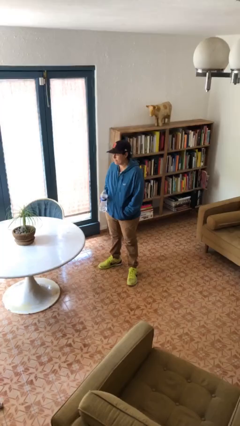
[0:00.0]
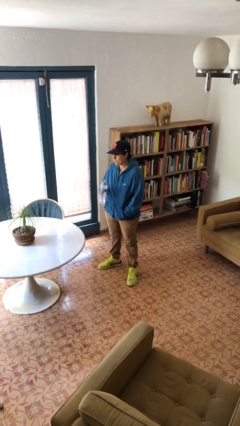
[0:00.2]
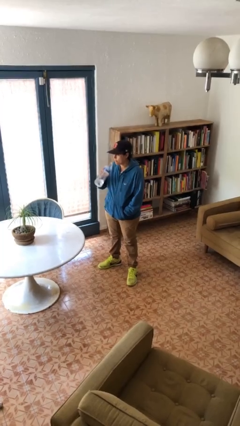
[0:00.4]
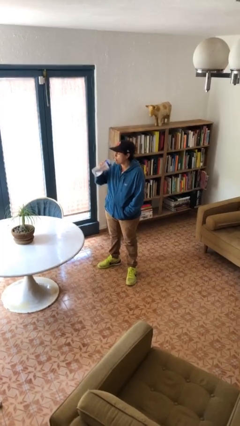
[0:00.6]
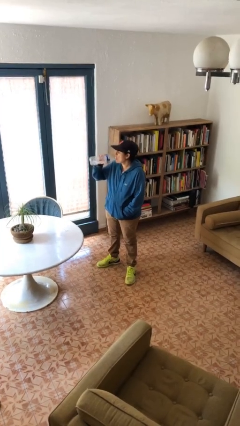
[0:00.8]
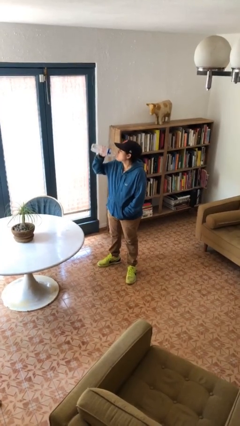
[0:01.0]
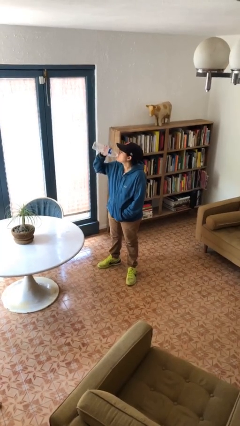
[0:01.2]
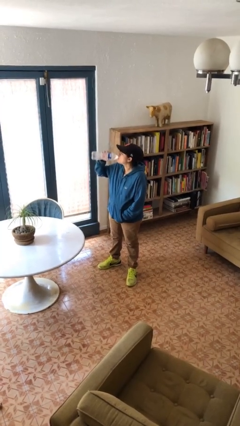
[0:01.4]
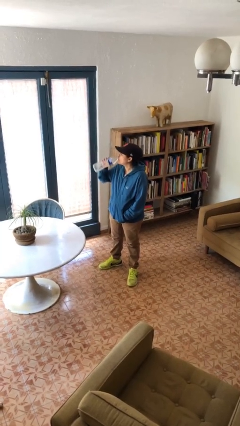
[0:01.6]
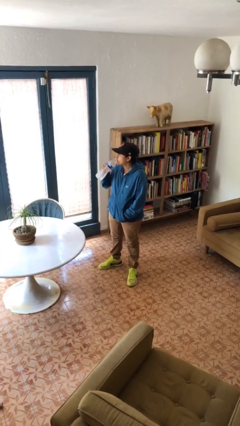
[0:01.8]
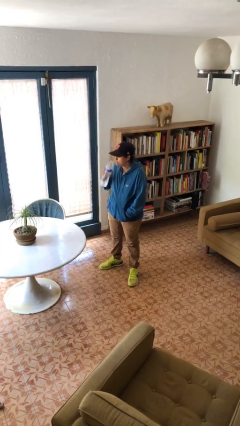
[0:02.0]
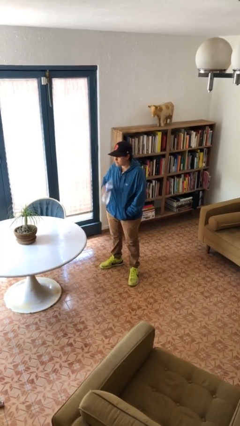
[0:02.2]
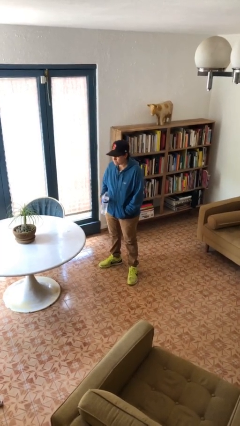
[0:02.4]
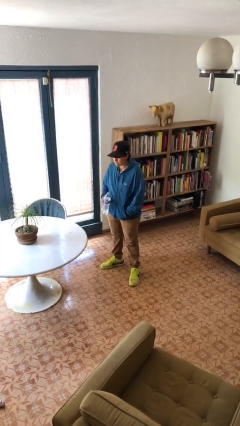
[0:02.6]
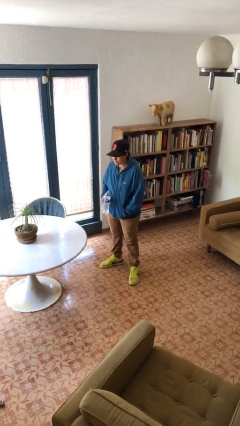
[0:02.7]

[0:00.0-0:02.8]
person drinks from bottle

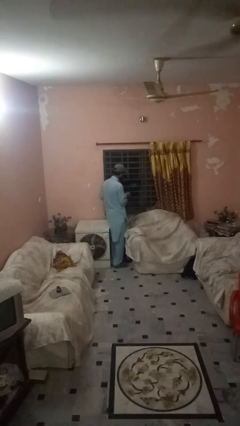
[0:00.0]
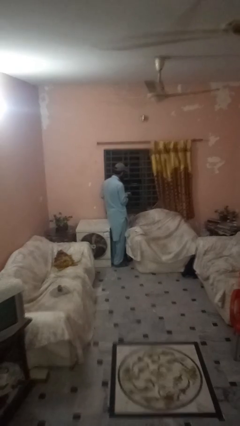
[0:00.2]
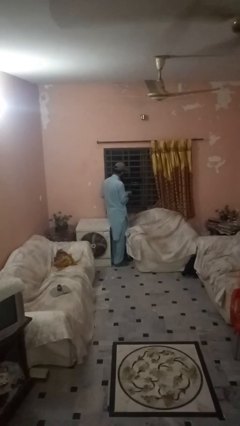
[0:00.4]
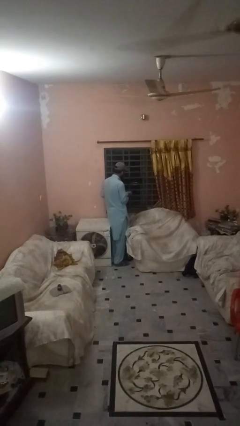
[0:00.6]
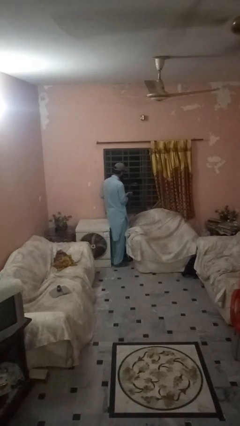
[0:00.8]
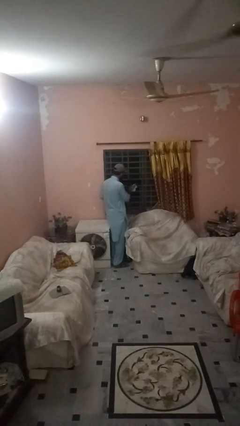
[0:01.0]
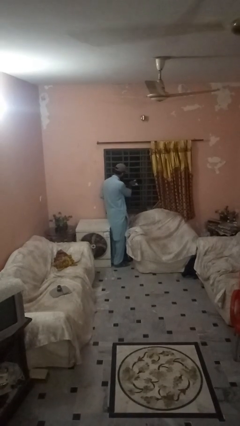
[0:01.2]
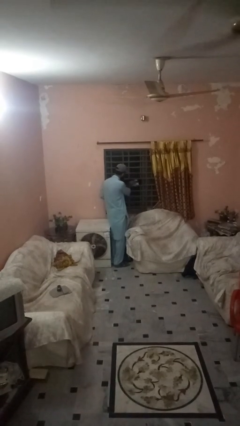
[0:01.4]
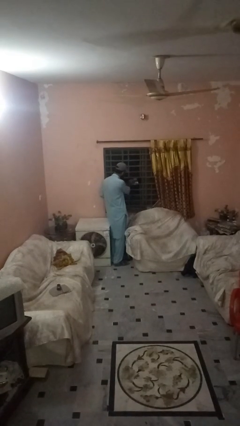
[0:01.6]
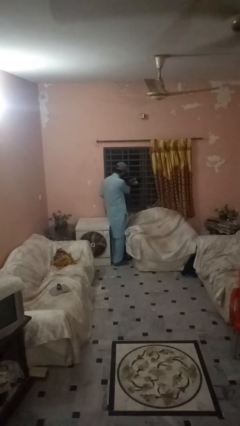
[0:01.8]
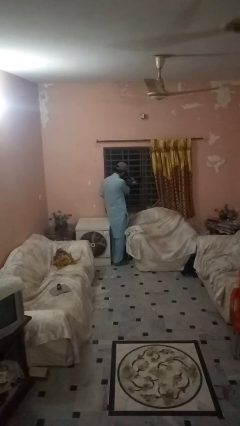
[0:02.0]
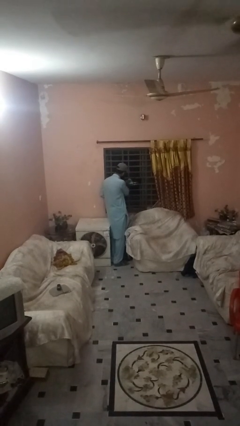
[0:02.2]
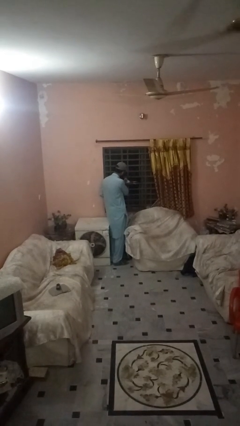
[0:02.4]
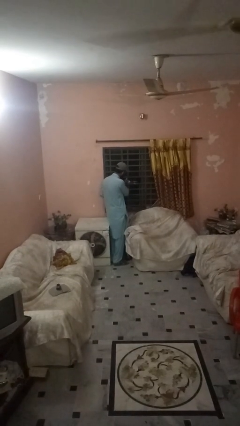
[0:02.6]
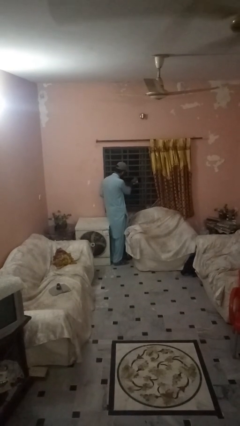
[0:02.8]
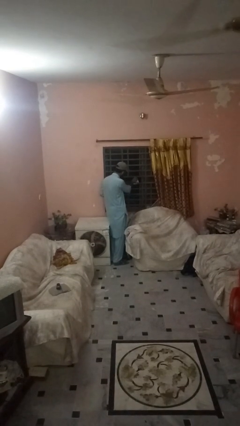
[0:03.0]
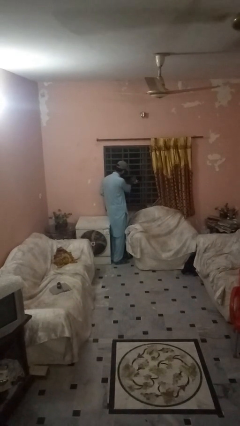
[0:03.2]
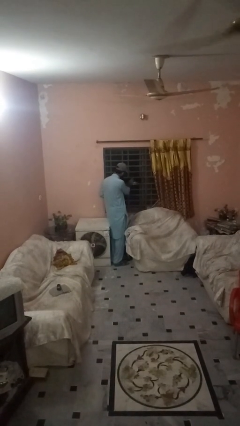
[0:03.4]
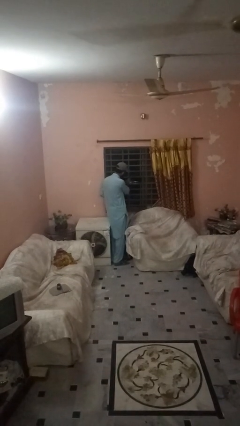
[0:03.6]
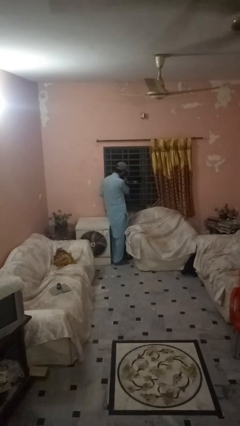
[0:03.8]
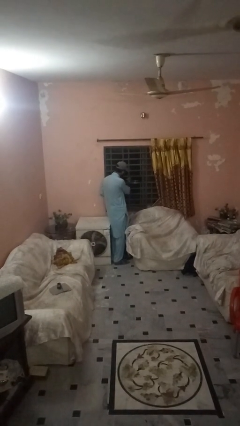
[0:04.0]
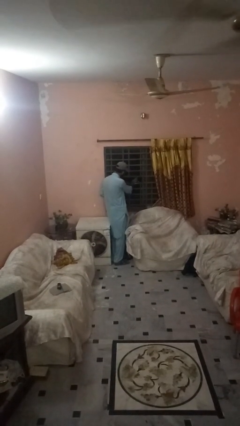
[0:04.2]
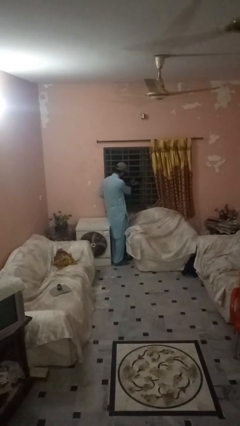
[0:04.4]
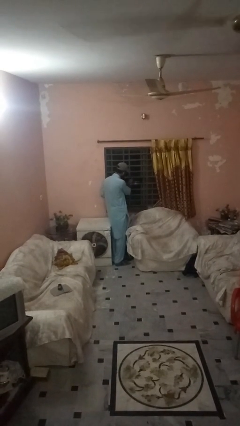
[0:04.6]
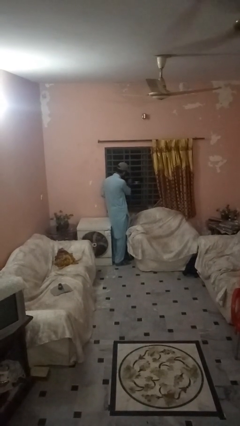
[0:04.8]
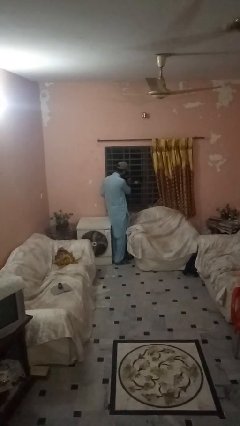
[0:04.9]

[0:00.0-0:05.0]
person washes window

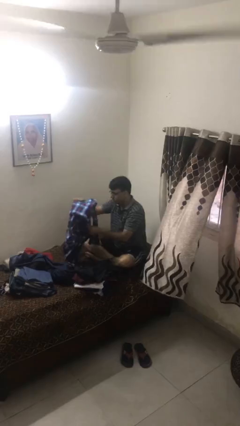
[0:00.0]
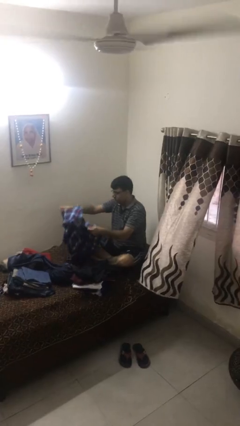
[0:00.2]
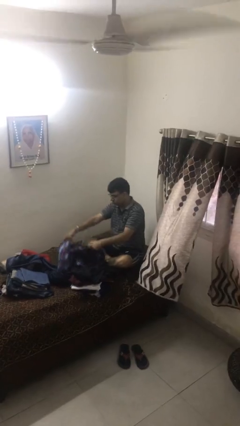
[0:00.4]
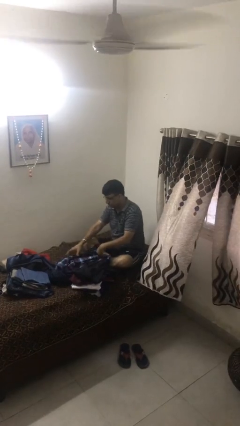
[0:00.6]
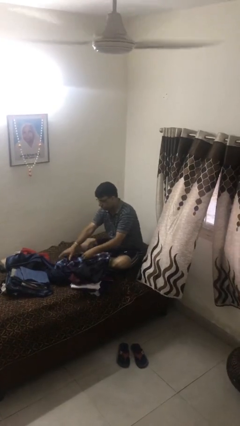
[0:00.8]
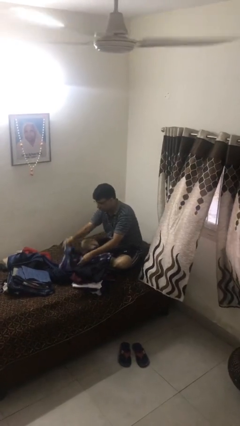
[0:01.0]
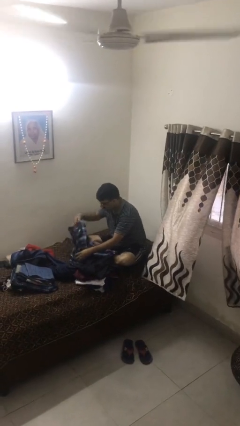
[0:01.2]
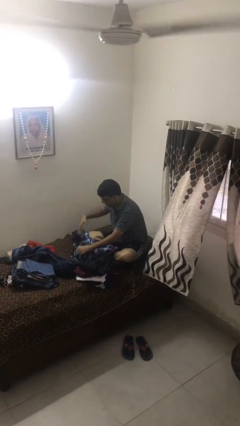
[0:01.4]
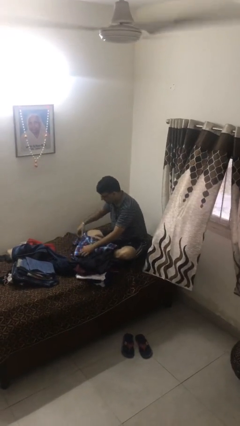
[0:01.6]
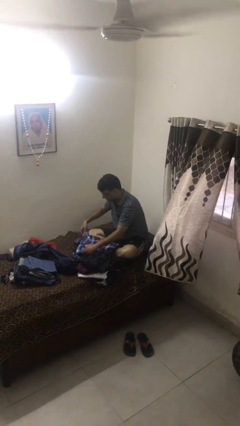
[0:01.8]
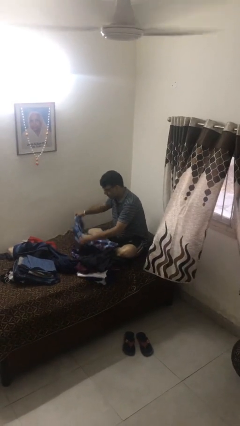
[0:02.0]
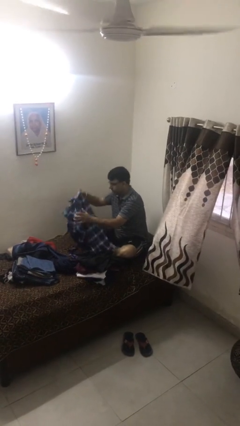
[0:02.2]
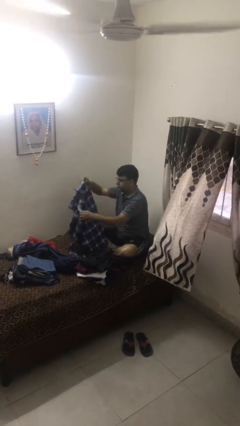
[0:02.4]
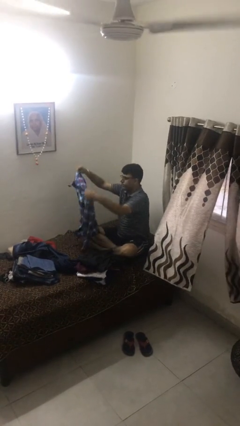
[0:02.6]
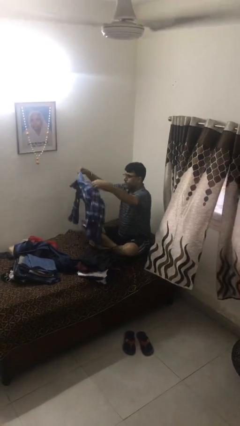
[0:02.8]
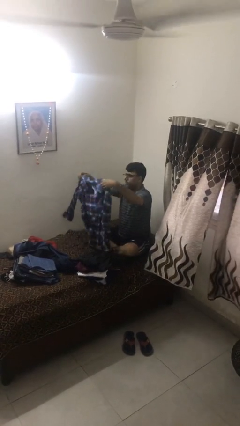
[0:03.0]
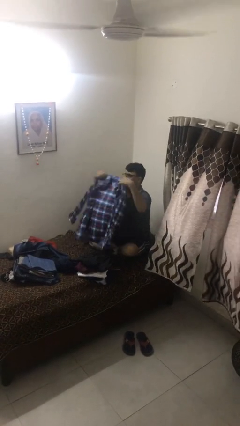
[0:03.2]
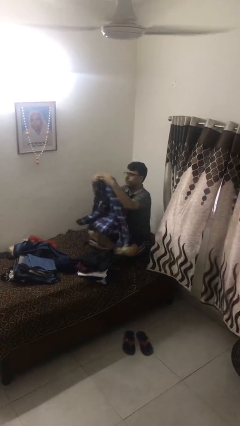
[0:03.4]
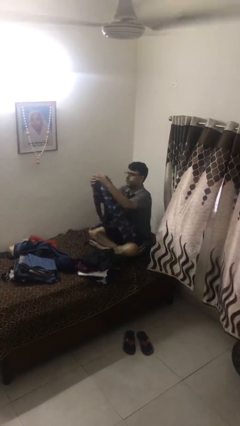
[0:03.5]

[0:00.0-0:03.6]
person folds shirt

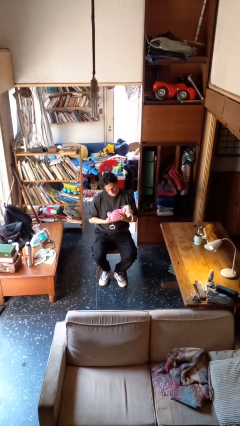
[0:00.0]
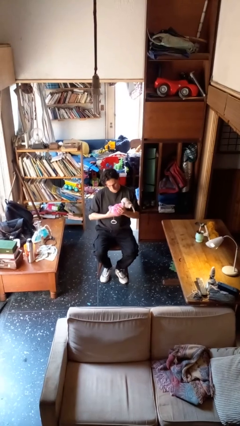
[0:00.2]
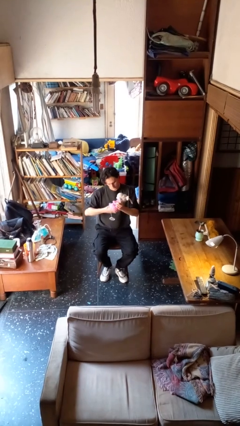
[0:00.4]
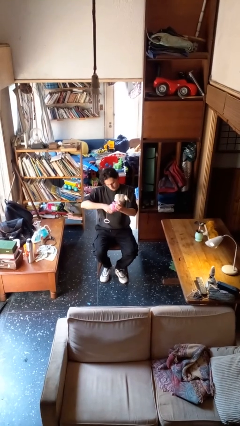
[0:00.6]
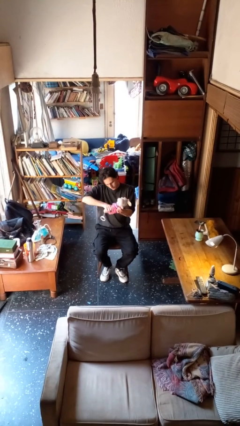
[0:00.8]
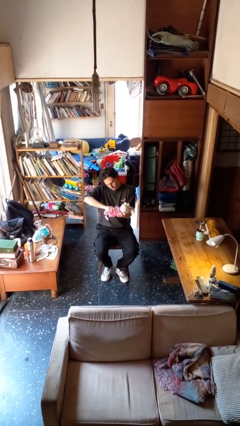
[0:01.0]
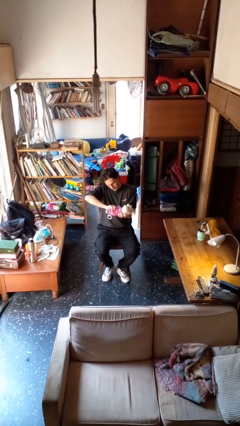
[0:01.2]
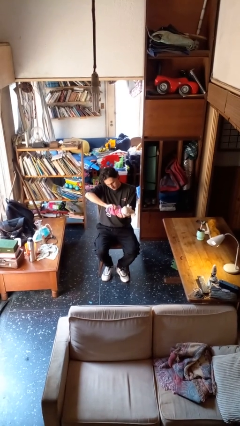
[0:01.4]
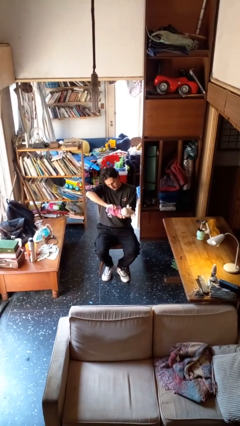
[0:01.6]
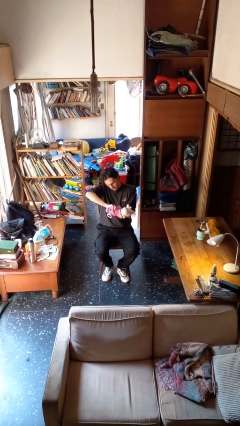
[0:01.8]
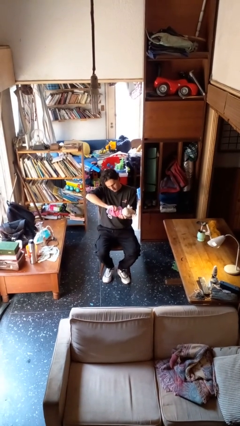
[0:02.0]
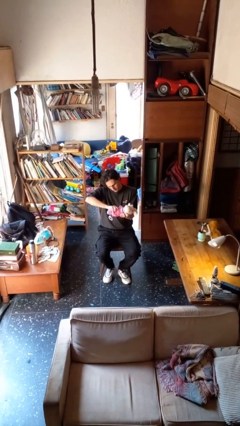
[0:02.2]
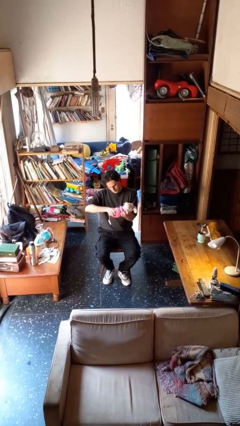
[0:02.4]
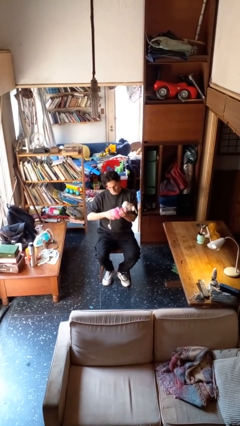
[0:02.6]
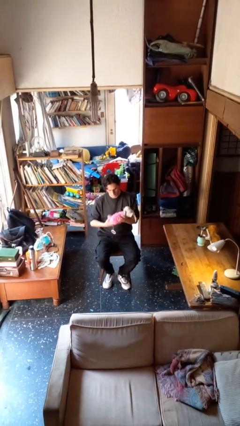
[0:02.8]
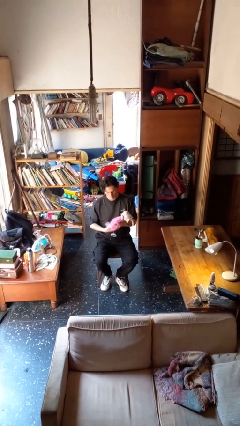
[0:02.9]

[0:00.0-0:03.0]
person squeezes object

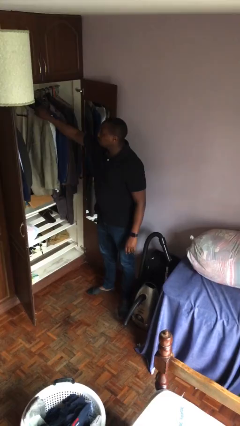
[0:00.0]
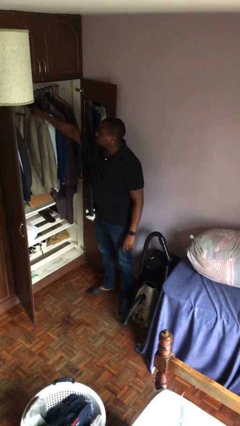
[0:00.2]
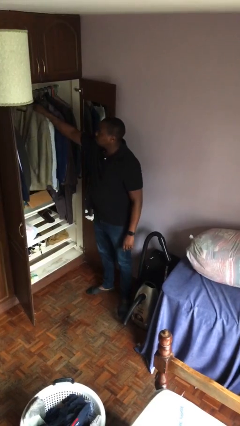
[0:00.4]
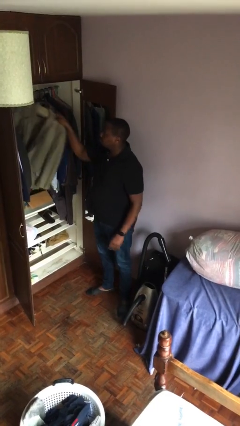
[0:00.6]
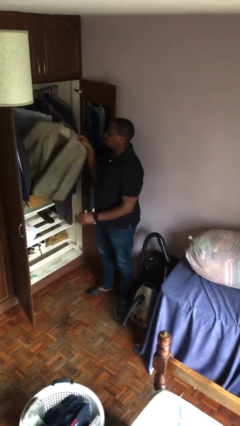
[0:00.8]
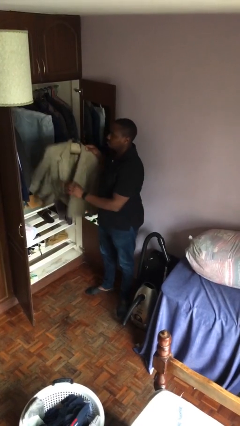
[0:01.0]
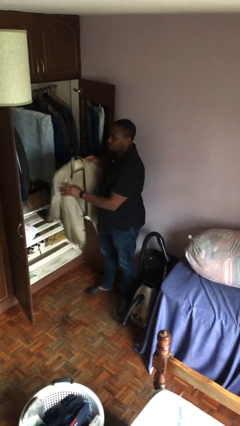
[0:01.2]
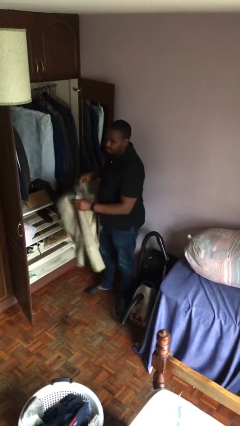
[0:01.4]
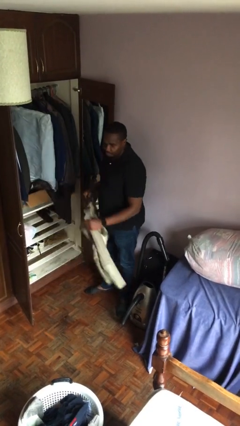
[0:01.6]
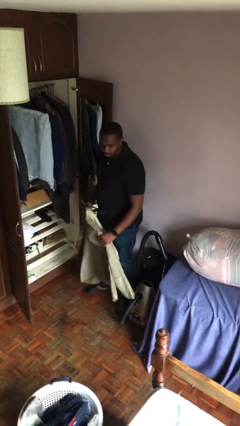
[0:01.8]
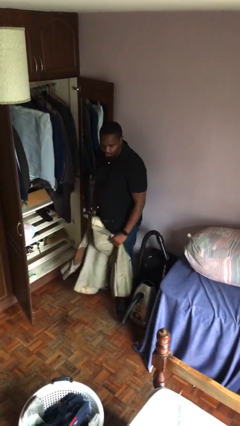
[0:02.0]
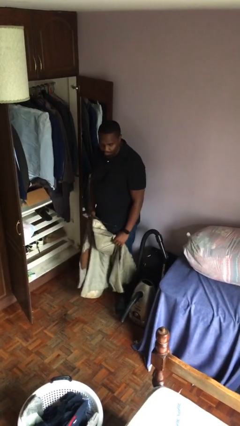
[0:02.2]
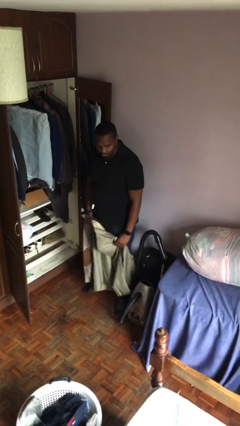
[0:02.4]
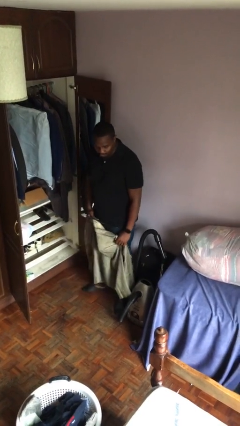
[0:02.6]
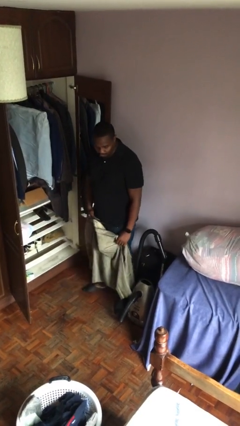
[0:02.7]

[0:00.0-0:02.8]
person takes clothes from closet

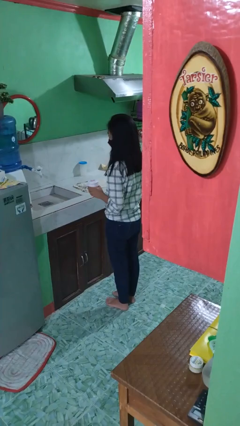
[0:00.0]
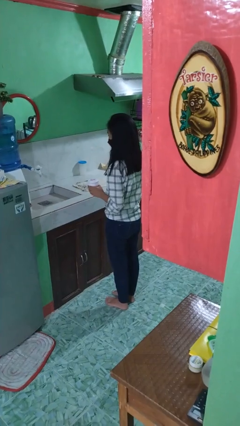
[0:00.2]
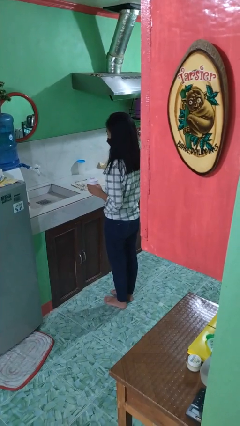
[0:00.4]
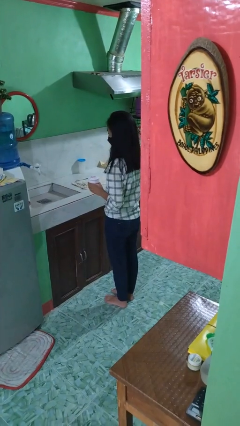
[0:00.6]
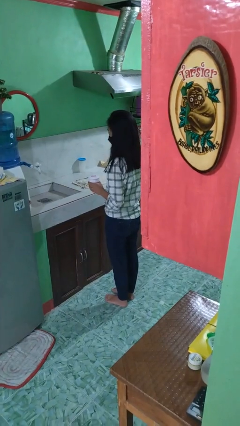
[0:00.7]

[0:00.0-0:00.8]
person puts down object on countertop
